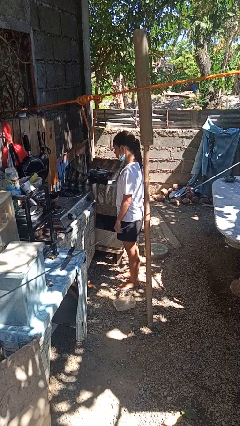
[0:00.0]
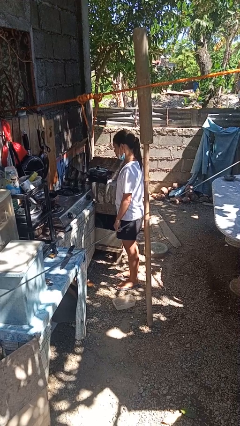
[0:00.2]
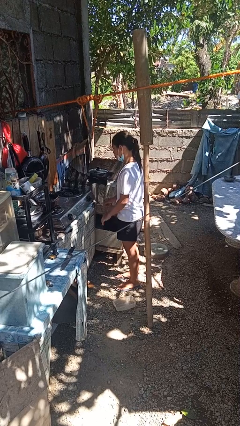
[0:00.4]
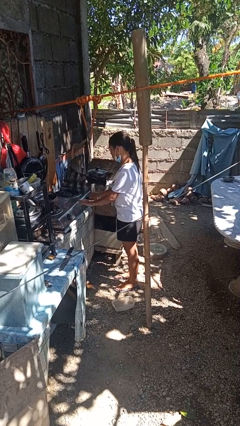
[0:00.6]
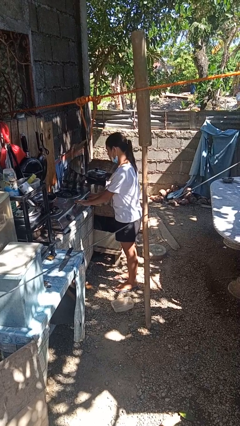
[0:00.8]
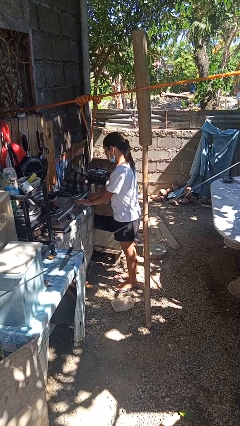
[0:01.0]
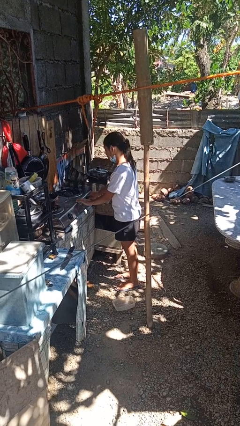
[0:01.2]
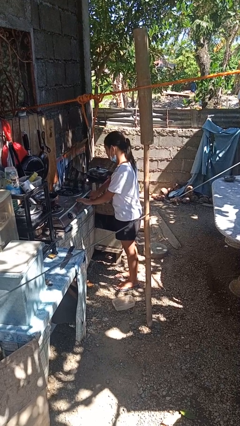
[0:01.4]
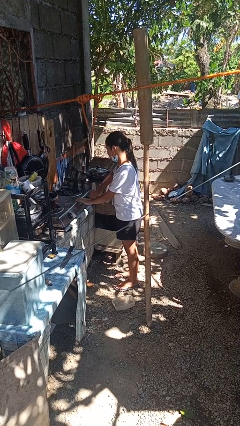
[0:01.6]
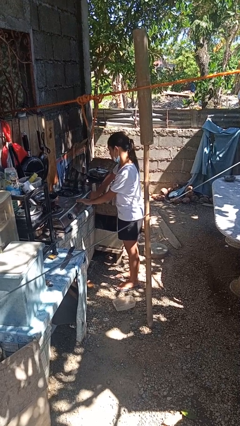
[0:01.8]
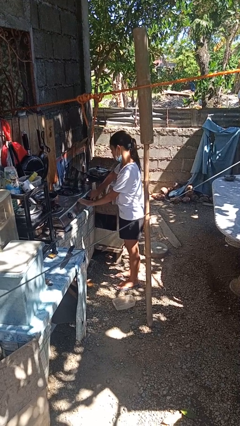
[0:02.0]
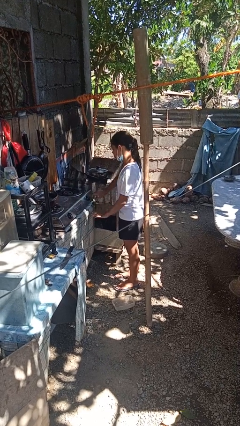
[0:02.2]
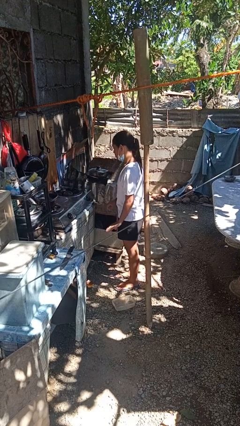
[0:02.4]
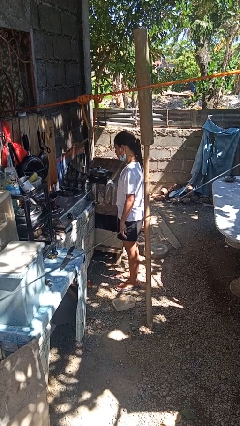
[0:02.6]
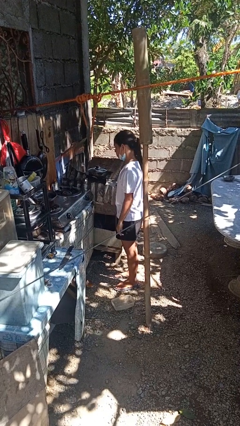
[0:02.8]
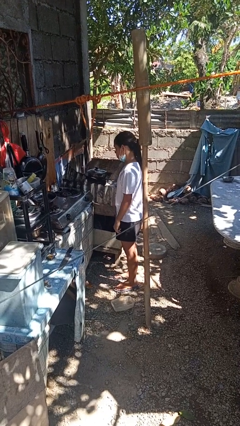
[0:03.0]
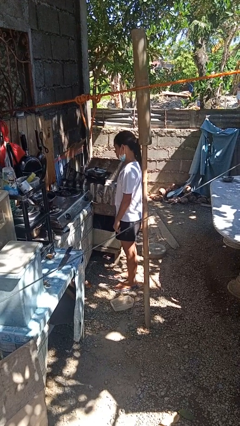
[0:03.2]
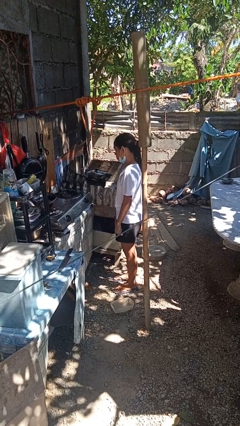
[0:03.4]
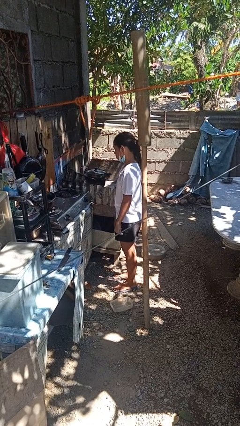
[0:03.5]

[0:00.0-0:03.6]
person turns on stovetop

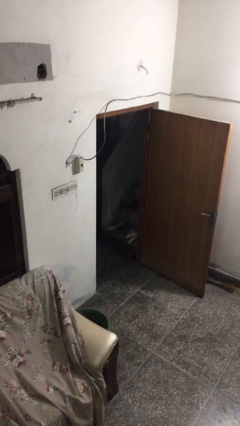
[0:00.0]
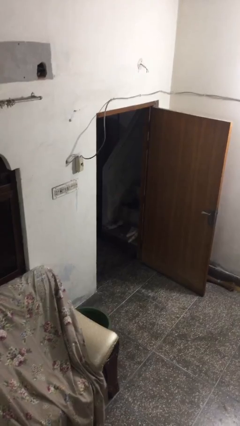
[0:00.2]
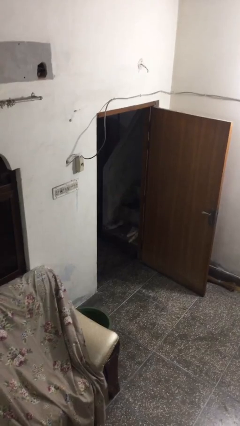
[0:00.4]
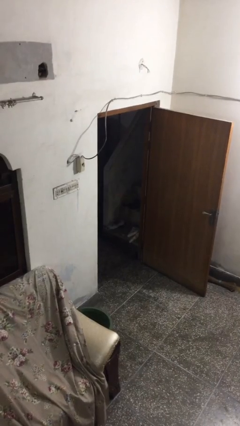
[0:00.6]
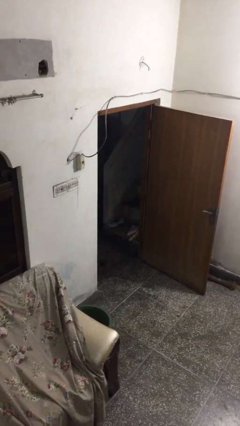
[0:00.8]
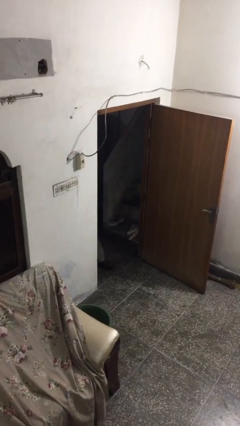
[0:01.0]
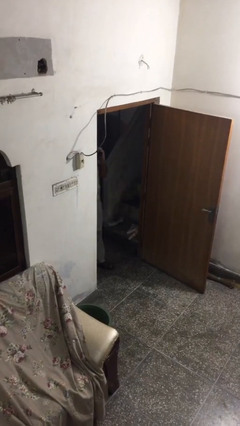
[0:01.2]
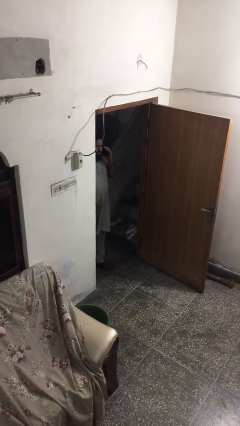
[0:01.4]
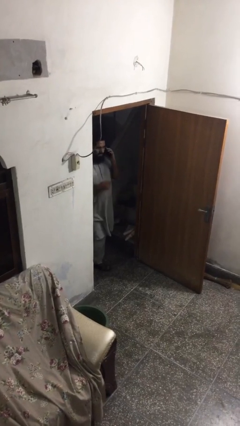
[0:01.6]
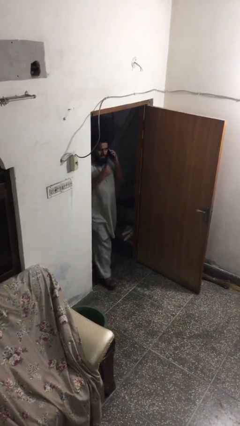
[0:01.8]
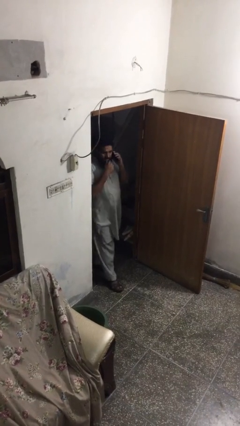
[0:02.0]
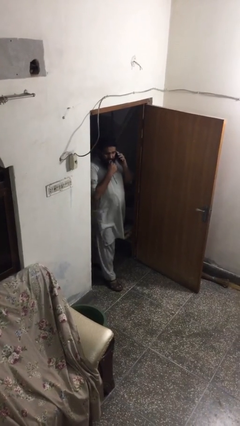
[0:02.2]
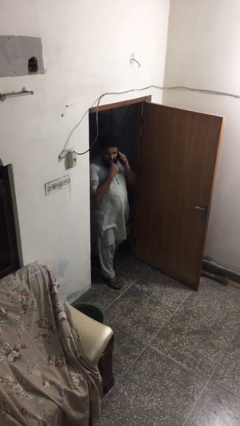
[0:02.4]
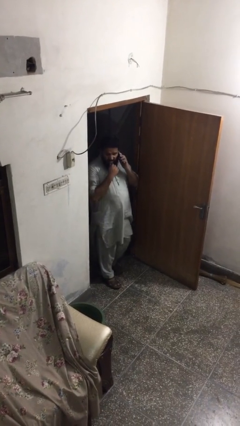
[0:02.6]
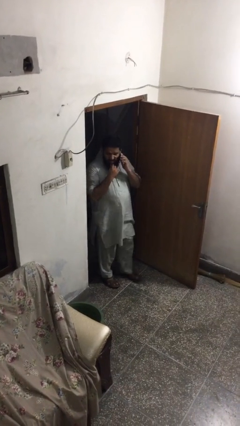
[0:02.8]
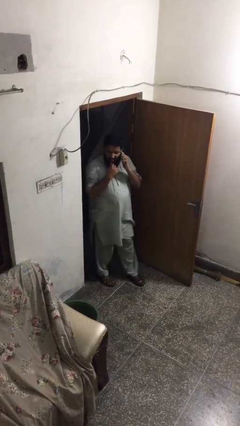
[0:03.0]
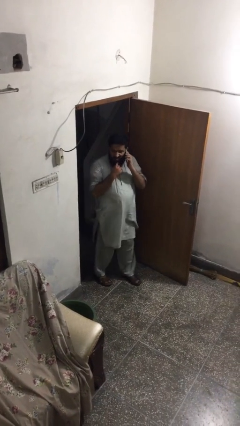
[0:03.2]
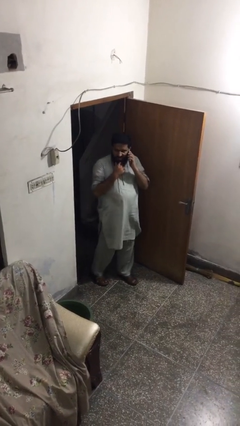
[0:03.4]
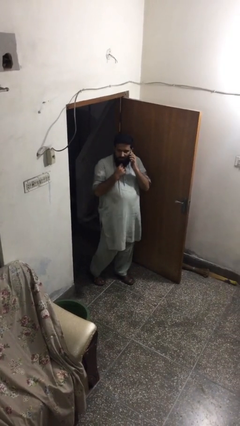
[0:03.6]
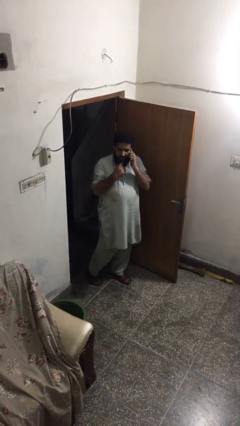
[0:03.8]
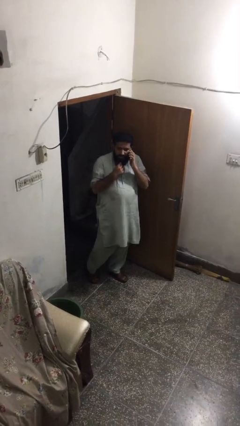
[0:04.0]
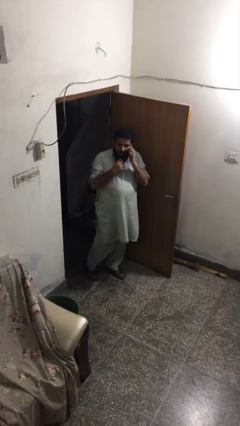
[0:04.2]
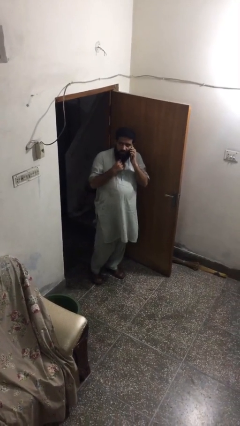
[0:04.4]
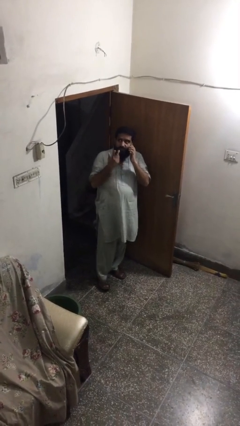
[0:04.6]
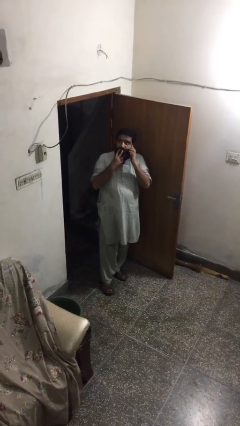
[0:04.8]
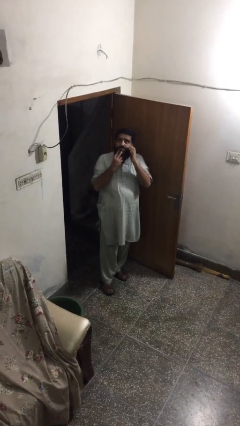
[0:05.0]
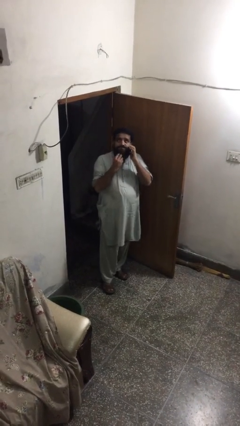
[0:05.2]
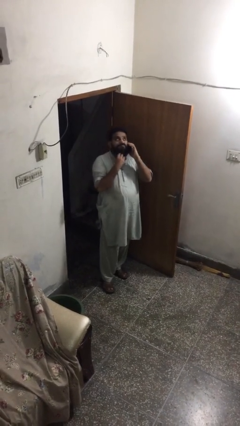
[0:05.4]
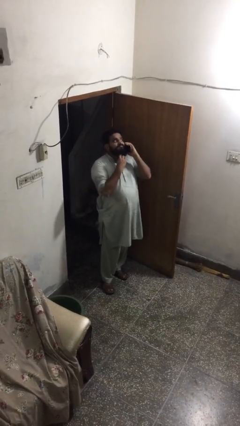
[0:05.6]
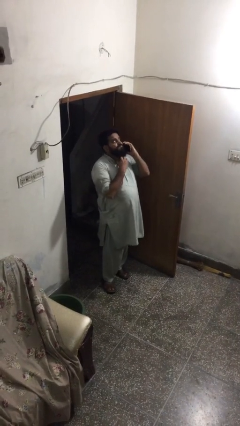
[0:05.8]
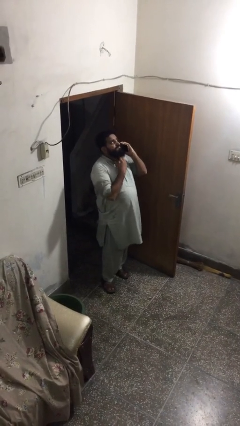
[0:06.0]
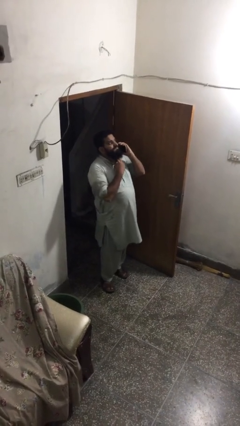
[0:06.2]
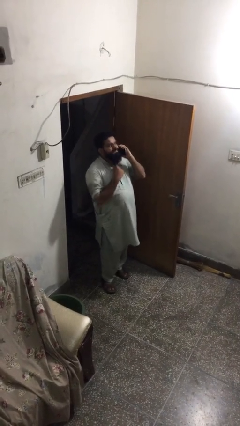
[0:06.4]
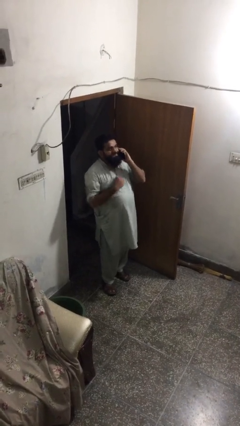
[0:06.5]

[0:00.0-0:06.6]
person enters scene through structure

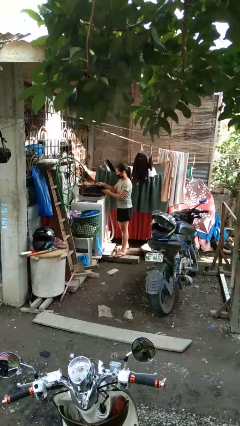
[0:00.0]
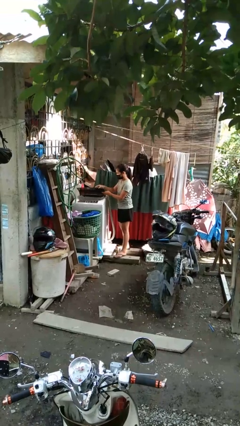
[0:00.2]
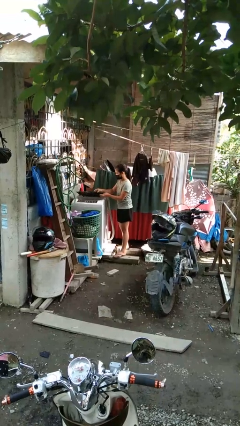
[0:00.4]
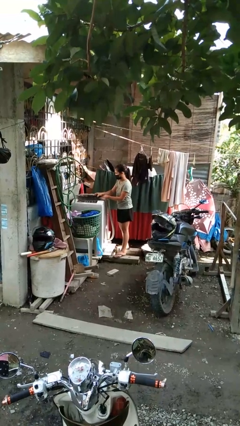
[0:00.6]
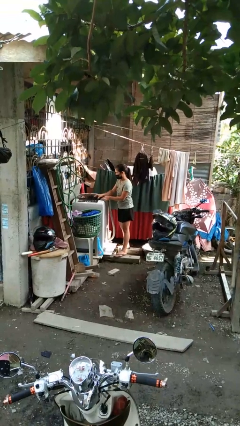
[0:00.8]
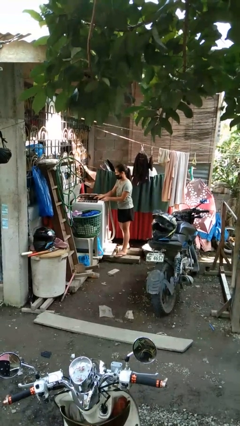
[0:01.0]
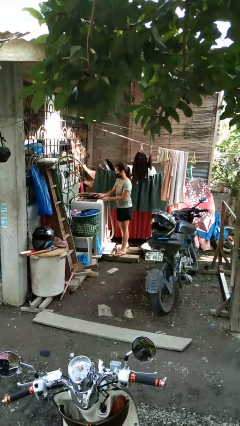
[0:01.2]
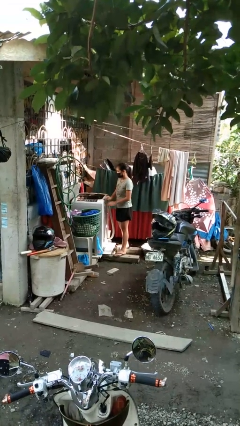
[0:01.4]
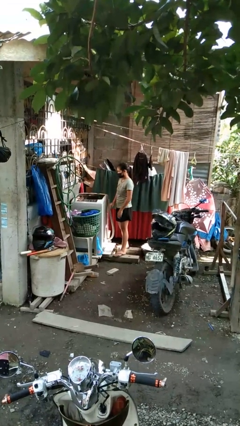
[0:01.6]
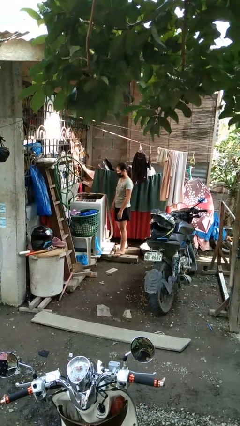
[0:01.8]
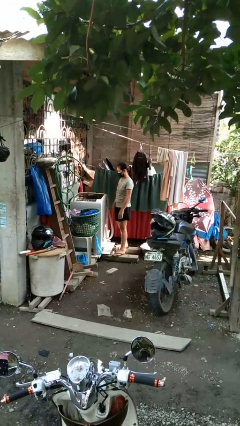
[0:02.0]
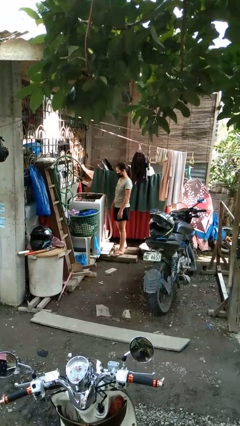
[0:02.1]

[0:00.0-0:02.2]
person closes clothes washer

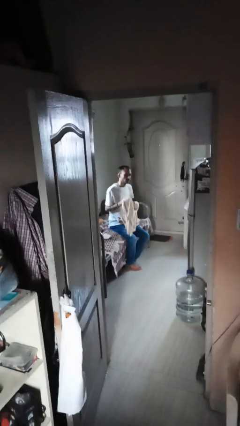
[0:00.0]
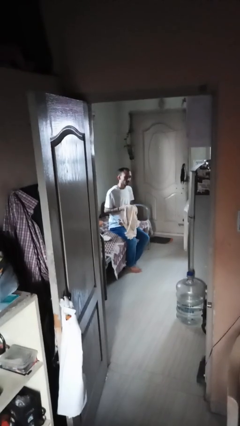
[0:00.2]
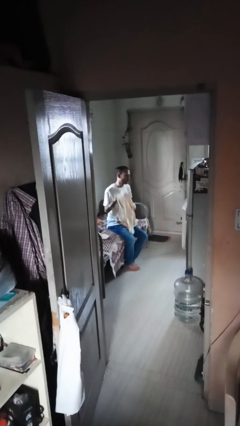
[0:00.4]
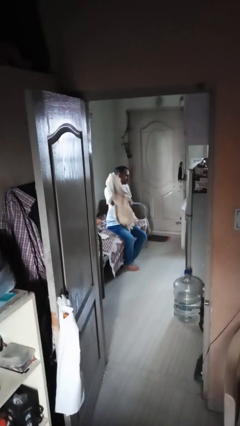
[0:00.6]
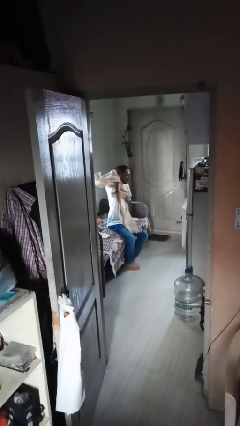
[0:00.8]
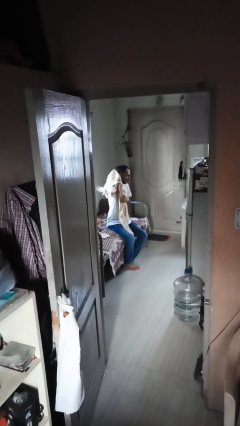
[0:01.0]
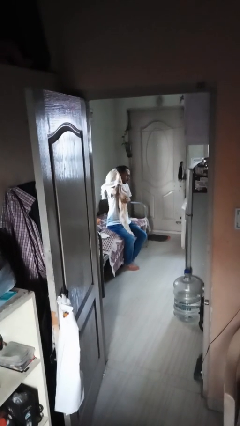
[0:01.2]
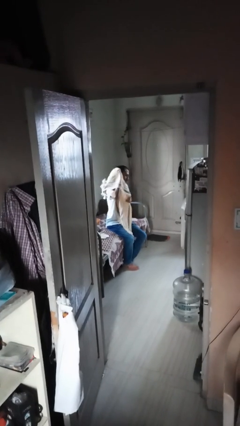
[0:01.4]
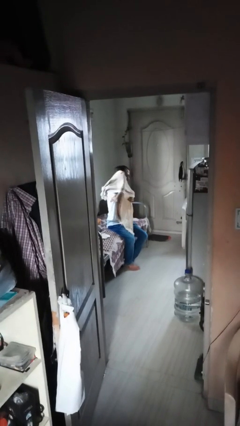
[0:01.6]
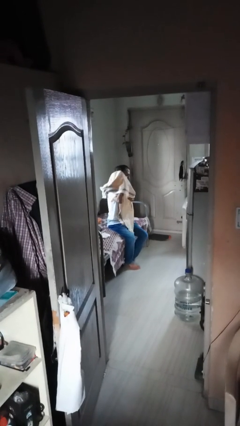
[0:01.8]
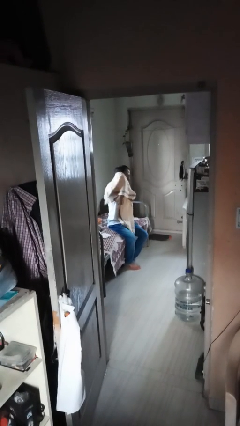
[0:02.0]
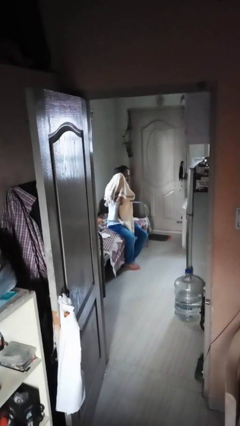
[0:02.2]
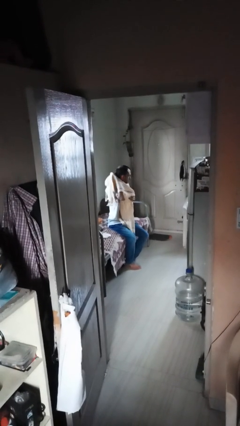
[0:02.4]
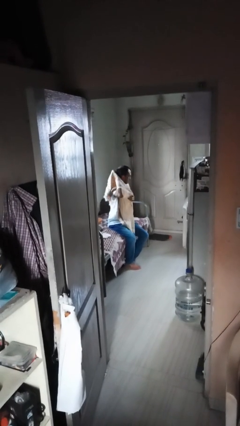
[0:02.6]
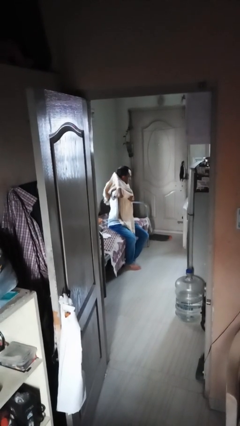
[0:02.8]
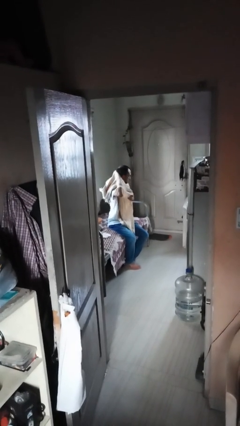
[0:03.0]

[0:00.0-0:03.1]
person dries hair with towel

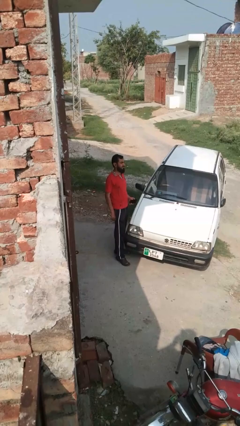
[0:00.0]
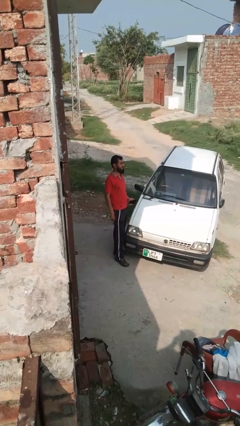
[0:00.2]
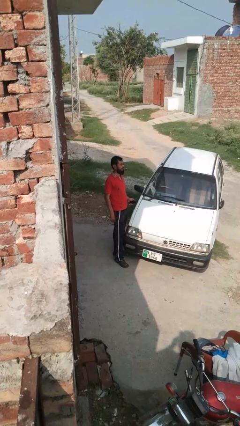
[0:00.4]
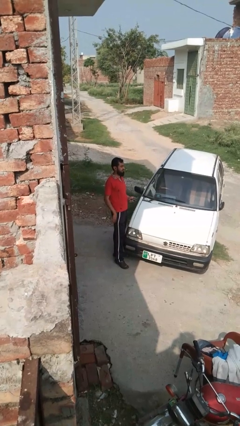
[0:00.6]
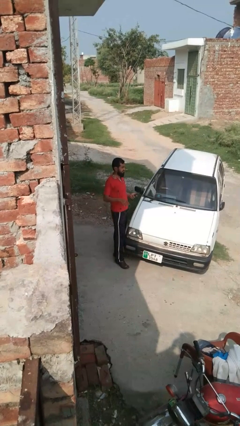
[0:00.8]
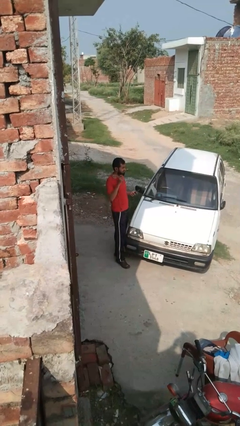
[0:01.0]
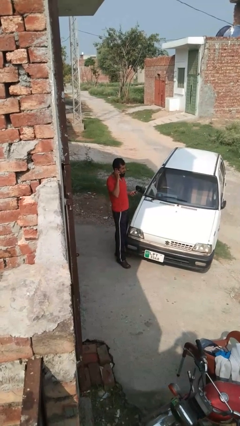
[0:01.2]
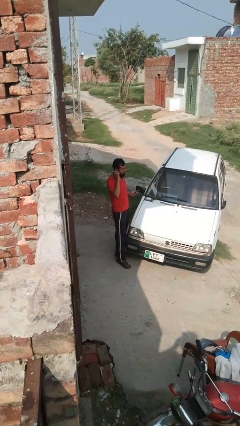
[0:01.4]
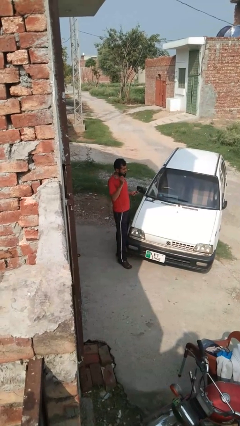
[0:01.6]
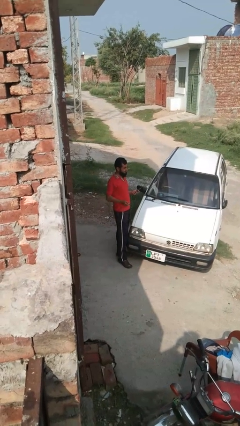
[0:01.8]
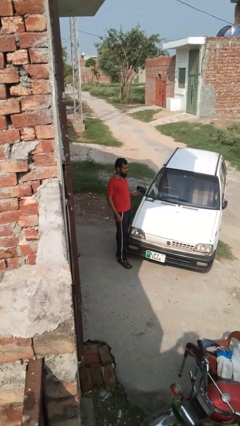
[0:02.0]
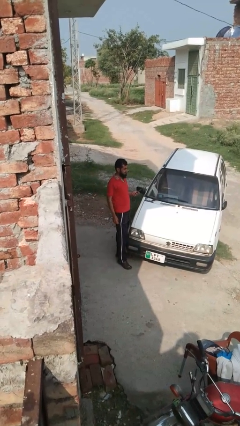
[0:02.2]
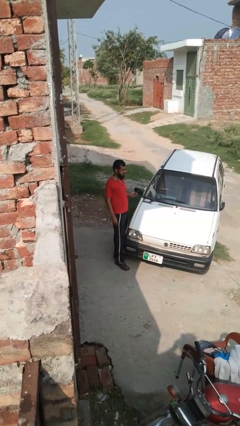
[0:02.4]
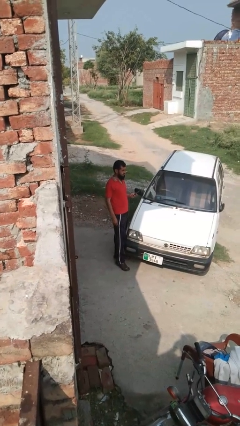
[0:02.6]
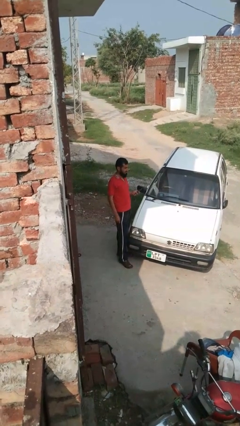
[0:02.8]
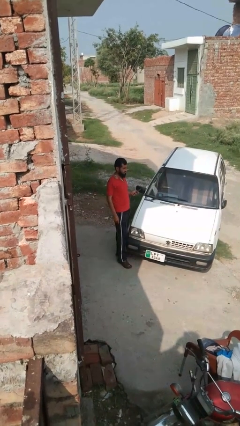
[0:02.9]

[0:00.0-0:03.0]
person takes off headphones
